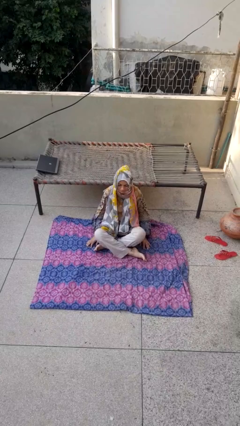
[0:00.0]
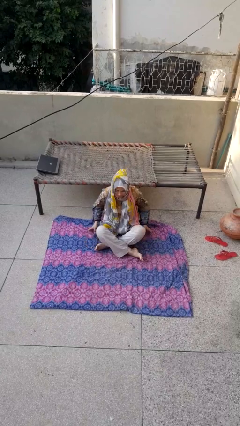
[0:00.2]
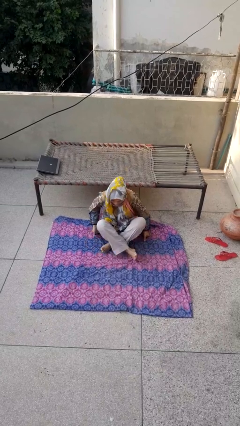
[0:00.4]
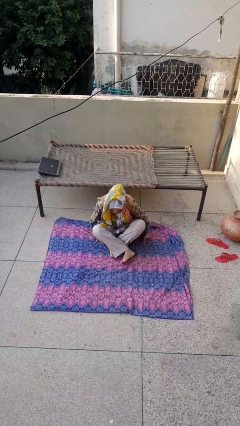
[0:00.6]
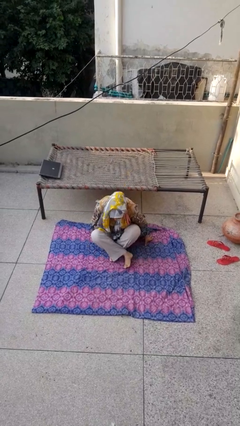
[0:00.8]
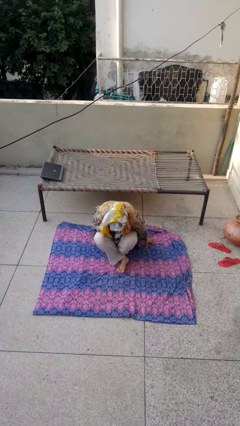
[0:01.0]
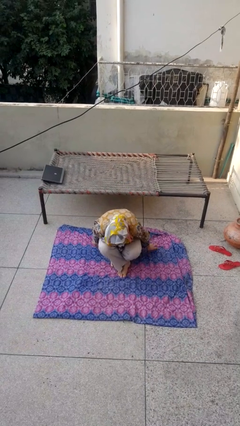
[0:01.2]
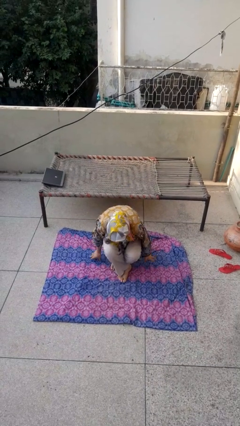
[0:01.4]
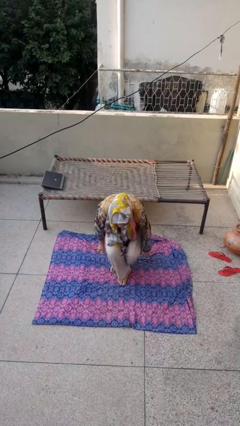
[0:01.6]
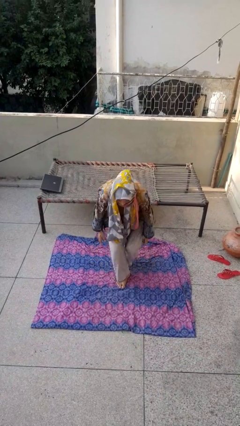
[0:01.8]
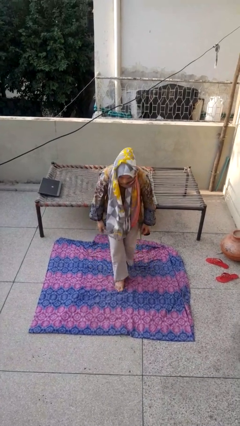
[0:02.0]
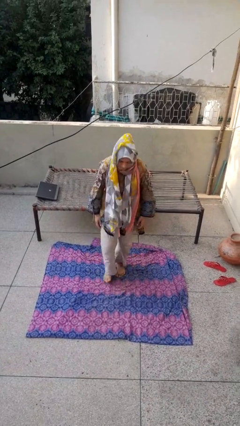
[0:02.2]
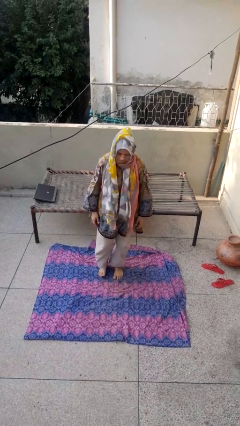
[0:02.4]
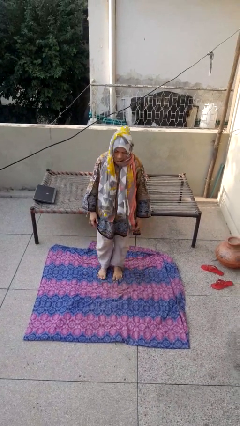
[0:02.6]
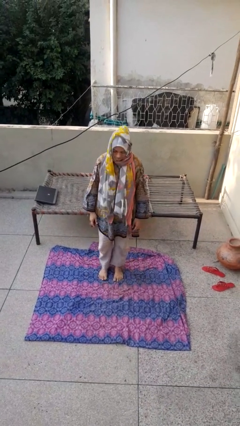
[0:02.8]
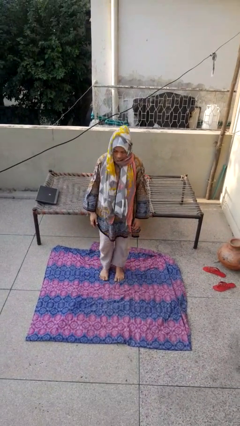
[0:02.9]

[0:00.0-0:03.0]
person stands up from floor

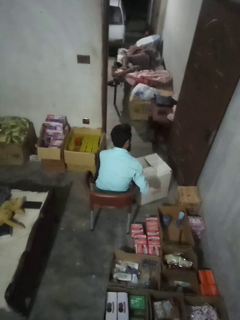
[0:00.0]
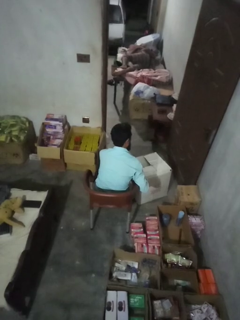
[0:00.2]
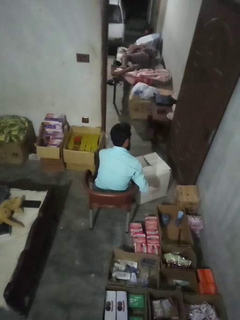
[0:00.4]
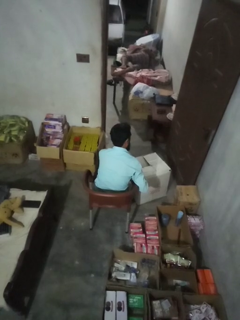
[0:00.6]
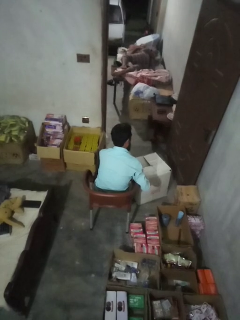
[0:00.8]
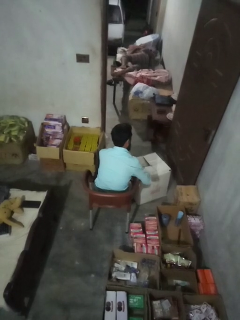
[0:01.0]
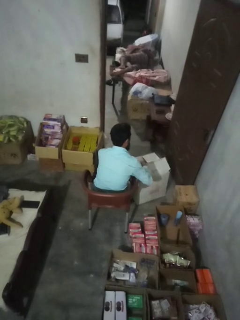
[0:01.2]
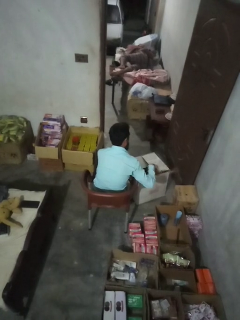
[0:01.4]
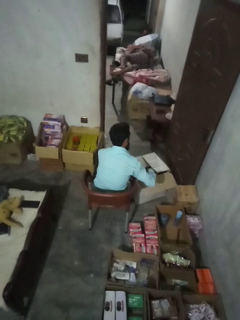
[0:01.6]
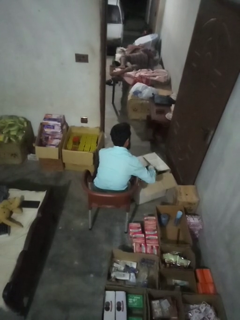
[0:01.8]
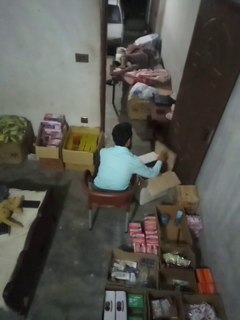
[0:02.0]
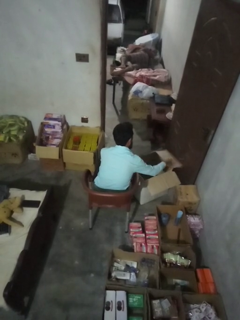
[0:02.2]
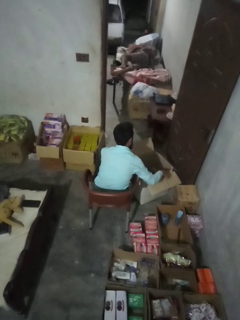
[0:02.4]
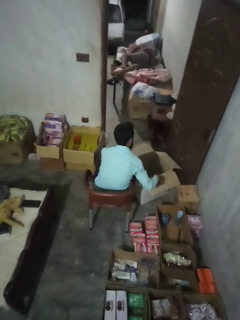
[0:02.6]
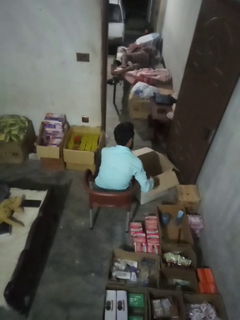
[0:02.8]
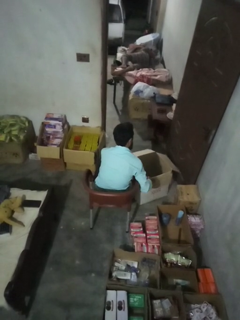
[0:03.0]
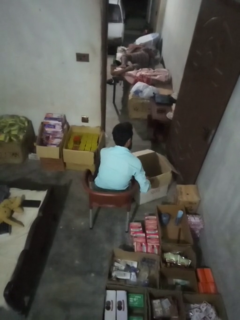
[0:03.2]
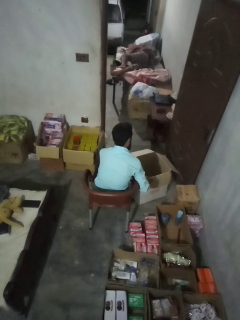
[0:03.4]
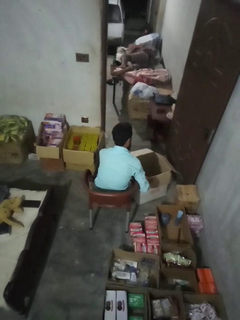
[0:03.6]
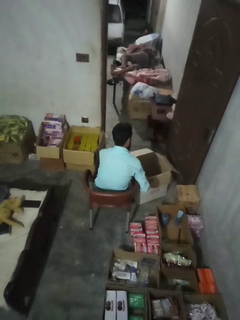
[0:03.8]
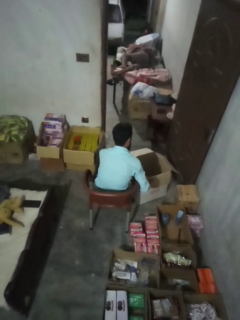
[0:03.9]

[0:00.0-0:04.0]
person opens box

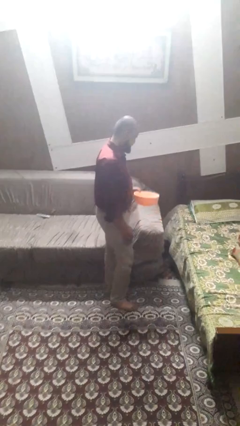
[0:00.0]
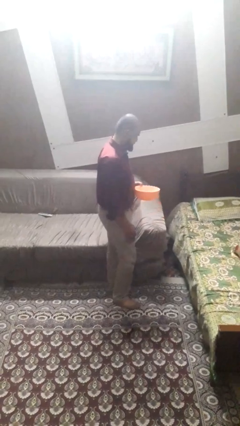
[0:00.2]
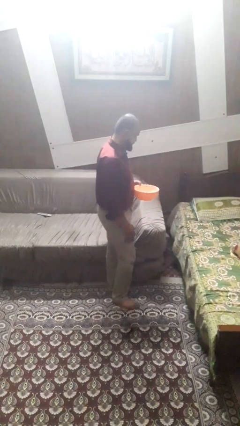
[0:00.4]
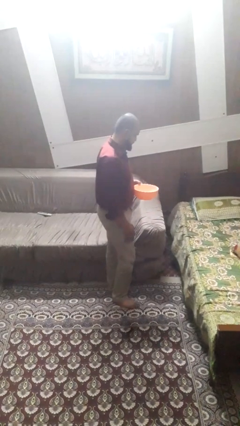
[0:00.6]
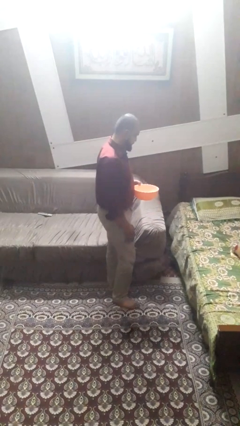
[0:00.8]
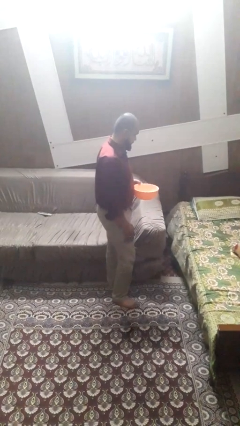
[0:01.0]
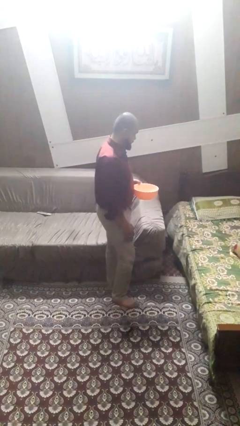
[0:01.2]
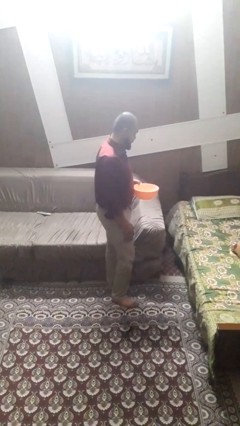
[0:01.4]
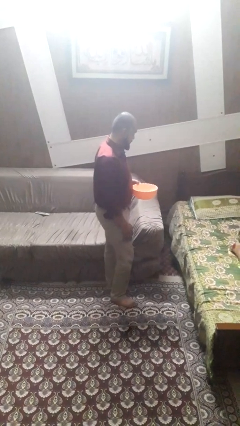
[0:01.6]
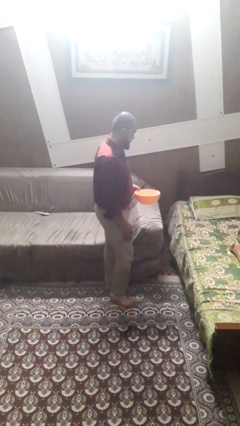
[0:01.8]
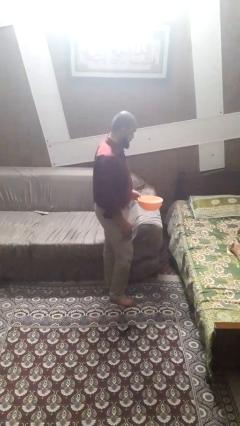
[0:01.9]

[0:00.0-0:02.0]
person picks up object from countertop

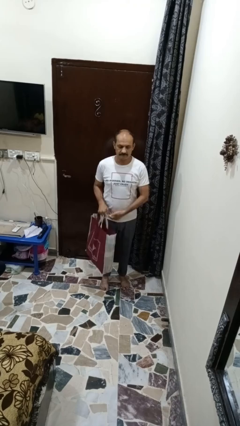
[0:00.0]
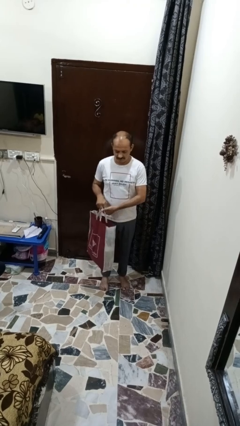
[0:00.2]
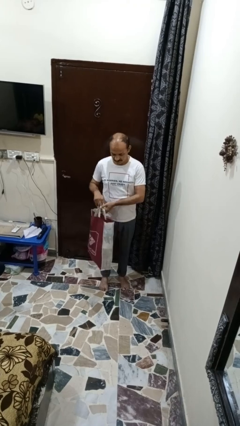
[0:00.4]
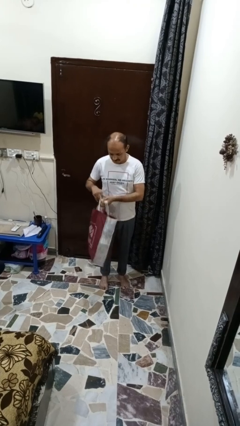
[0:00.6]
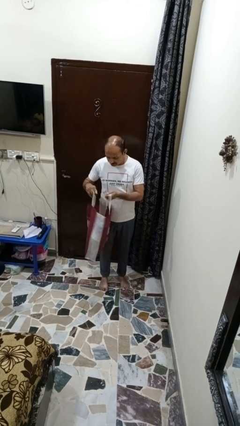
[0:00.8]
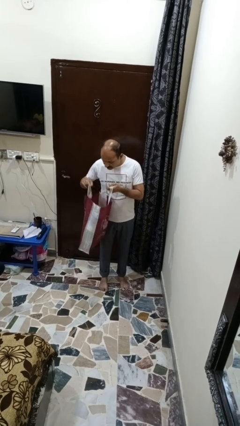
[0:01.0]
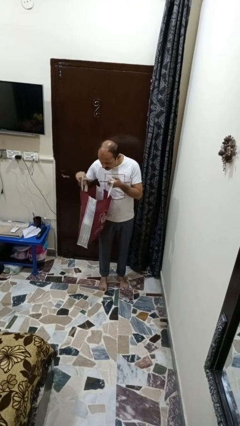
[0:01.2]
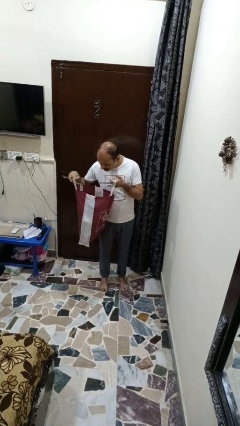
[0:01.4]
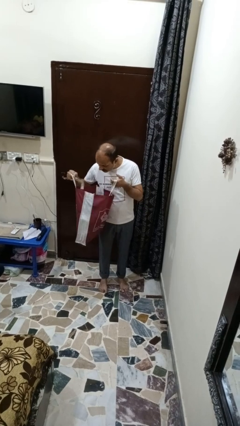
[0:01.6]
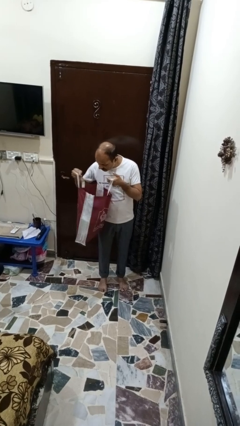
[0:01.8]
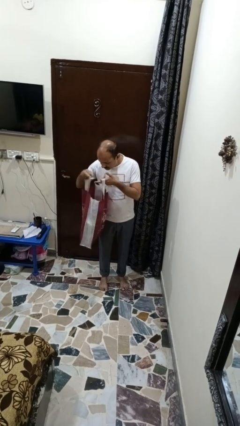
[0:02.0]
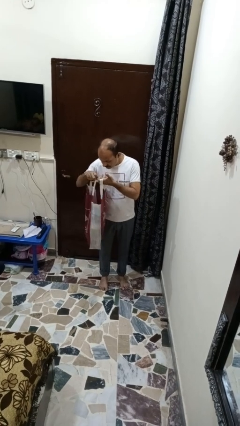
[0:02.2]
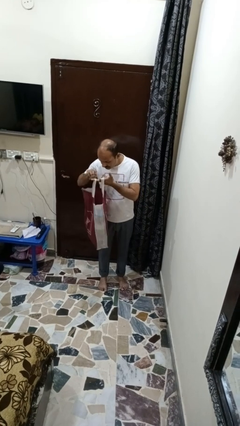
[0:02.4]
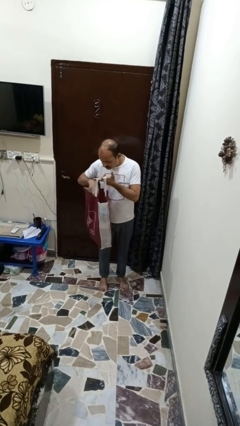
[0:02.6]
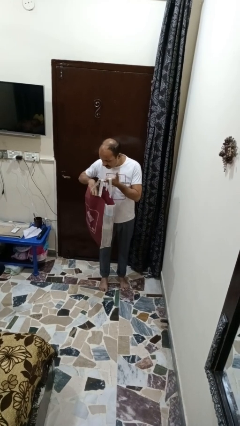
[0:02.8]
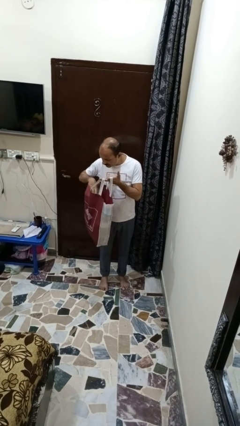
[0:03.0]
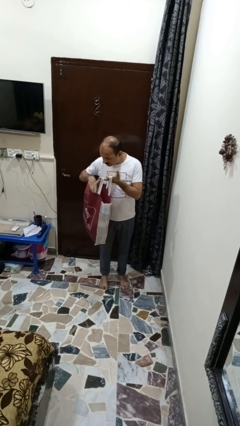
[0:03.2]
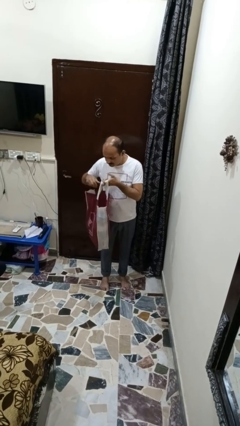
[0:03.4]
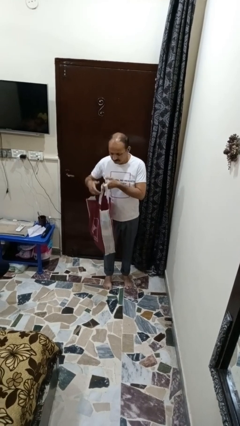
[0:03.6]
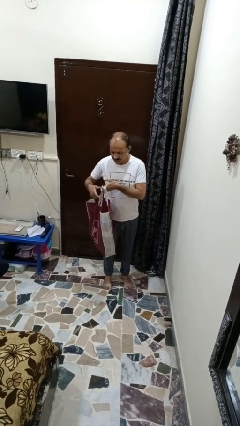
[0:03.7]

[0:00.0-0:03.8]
person searches in bag

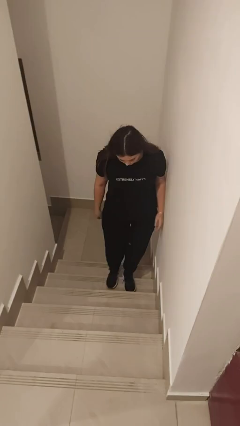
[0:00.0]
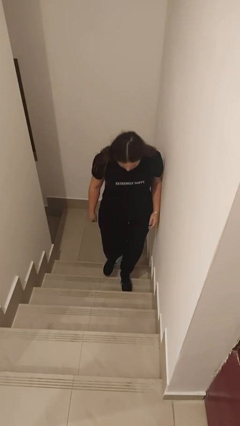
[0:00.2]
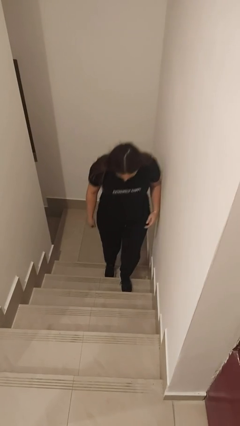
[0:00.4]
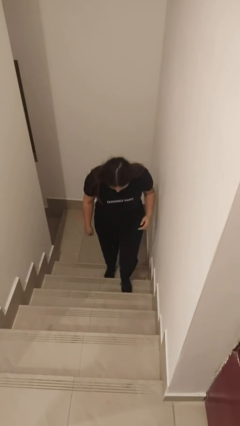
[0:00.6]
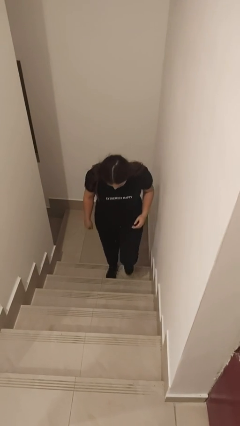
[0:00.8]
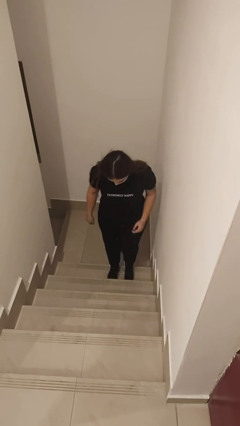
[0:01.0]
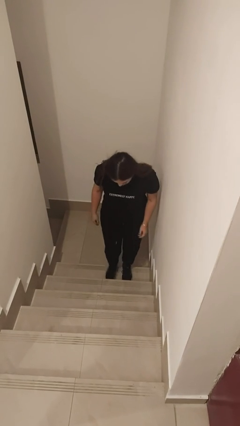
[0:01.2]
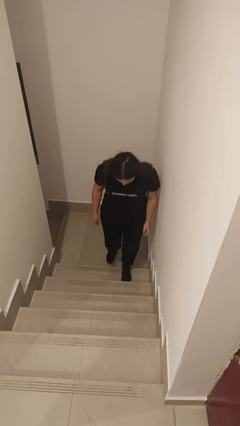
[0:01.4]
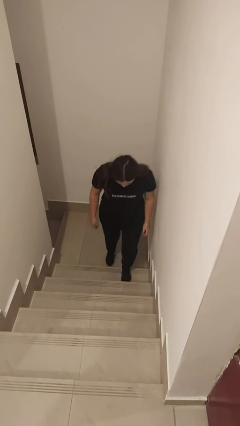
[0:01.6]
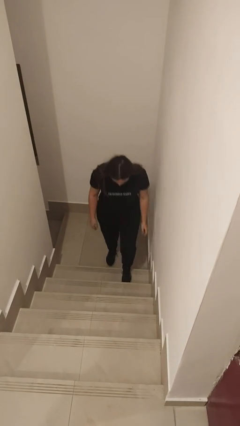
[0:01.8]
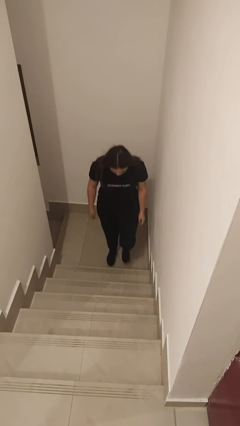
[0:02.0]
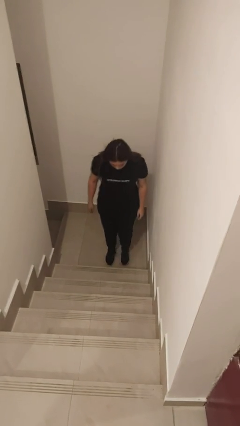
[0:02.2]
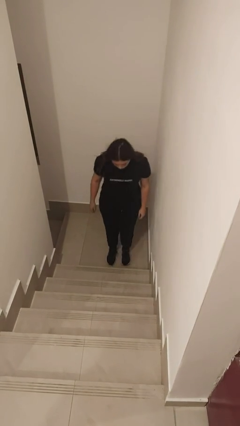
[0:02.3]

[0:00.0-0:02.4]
person climbs down stairs

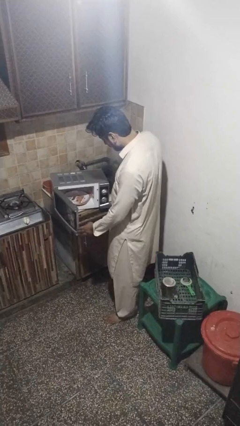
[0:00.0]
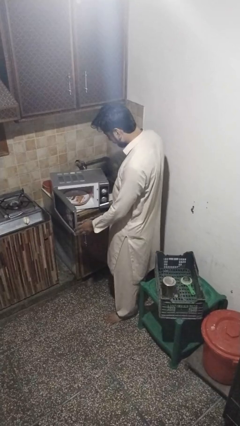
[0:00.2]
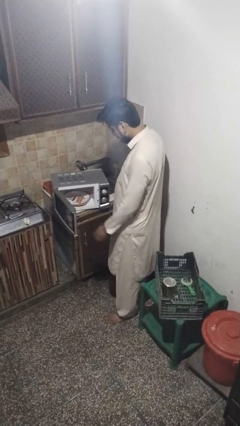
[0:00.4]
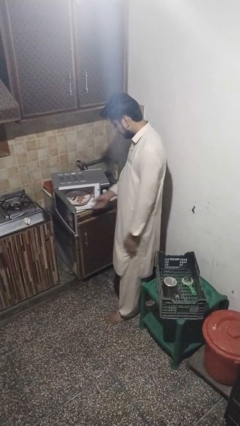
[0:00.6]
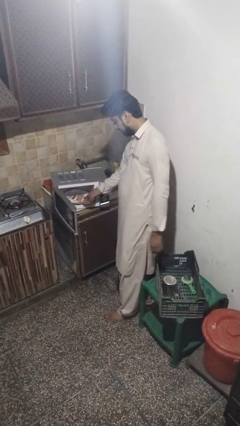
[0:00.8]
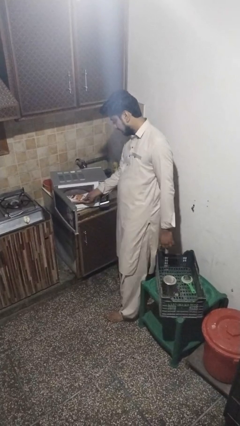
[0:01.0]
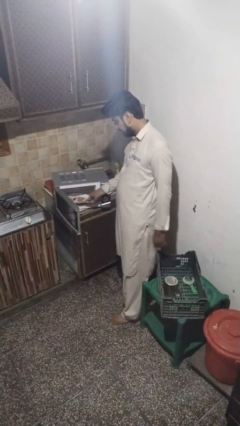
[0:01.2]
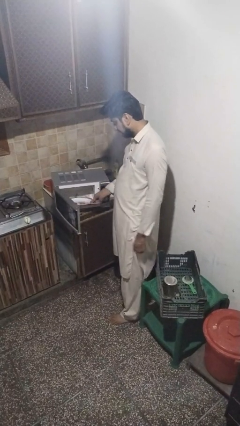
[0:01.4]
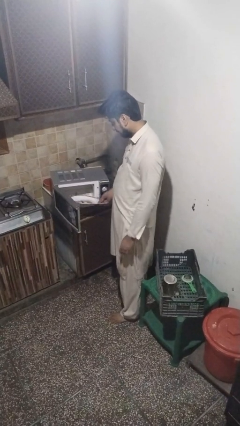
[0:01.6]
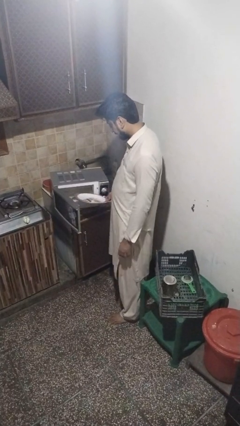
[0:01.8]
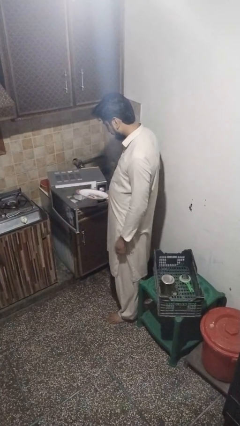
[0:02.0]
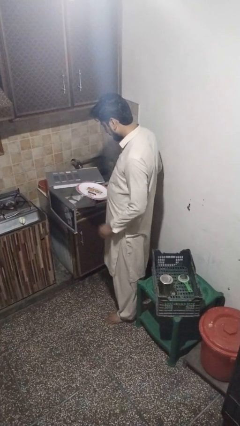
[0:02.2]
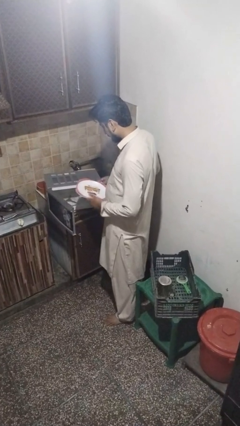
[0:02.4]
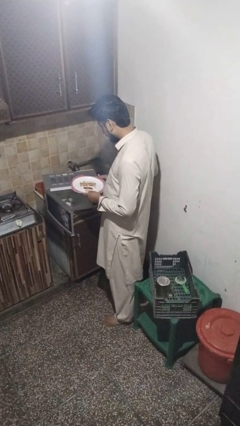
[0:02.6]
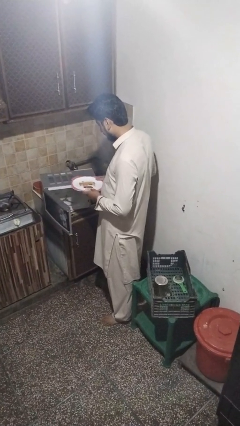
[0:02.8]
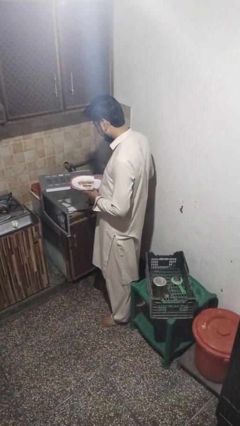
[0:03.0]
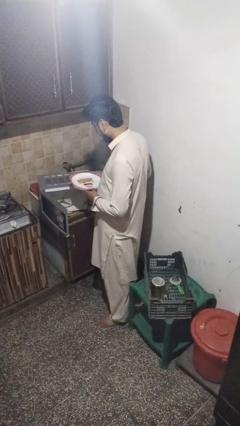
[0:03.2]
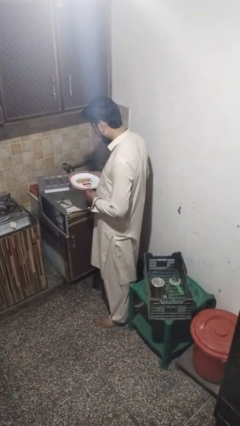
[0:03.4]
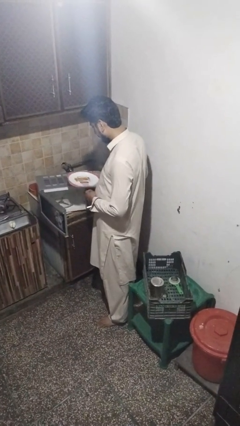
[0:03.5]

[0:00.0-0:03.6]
person takes object from microwave
